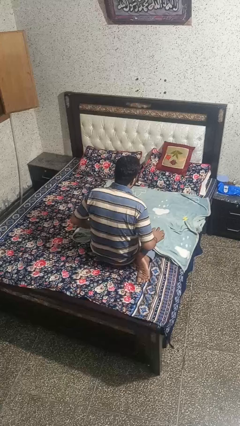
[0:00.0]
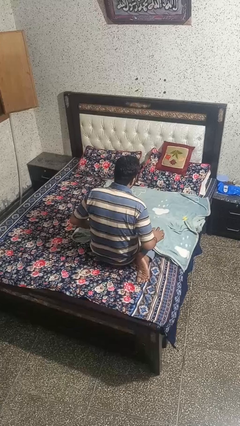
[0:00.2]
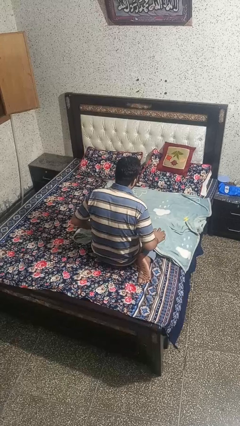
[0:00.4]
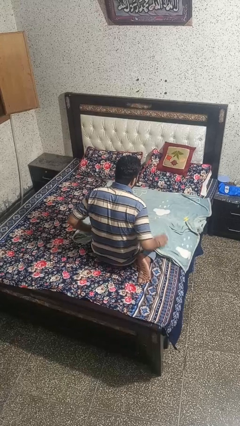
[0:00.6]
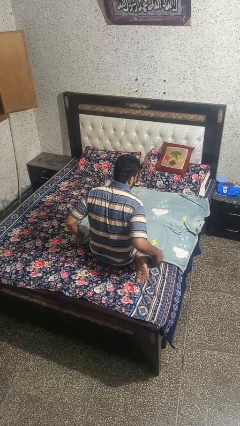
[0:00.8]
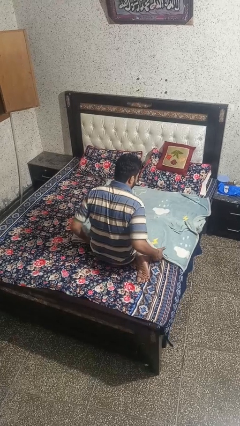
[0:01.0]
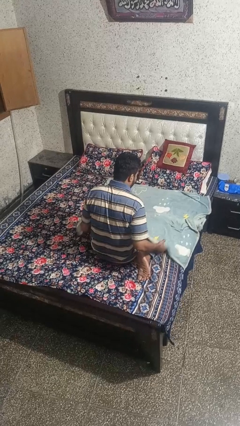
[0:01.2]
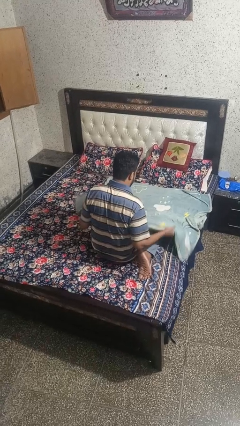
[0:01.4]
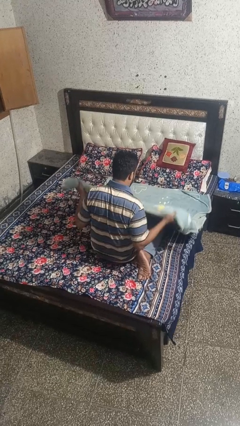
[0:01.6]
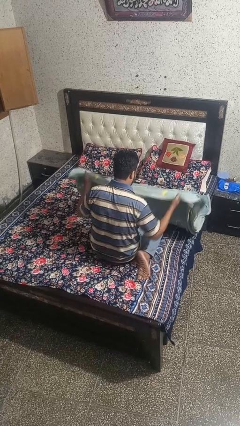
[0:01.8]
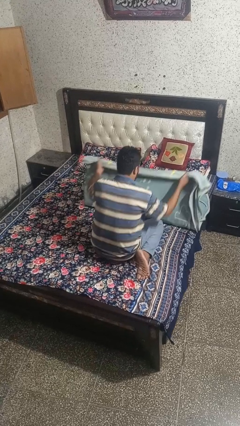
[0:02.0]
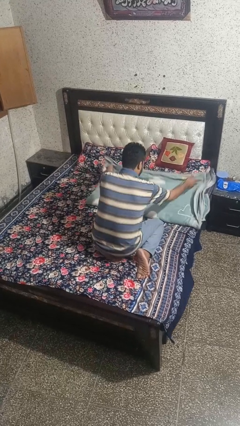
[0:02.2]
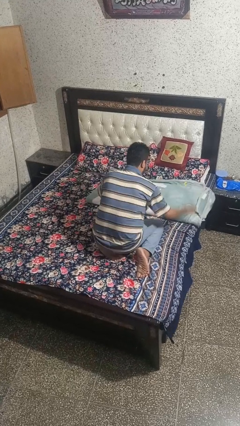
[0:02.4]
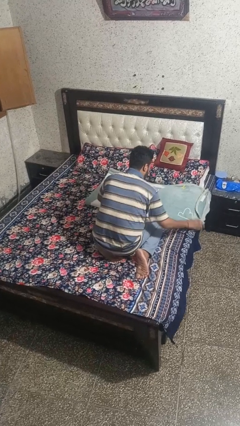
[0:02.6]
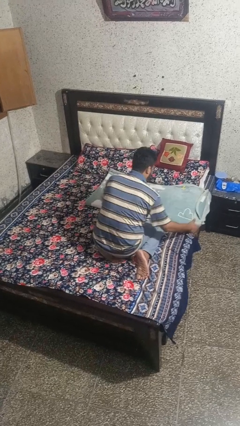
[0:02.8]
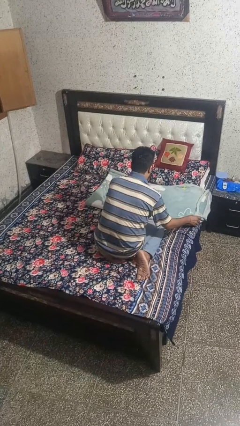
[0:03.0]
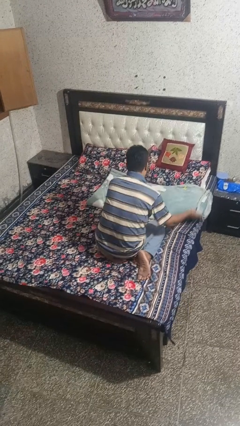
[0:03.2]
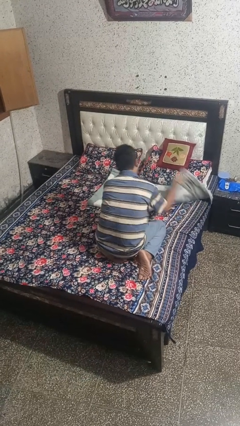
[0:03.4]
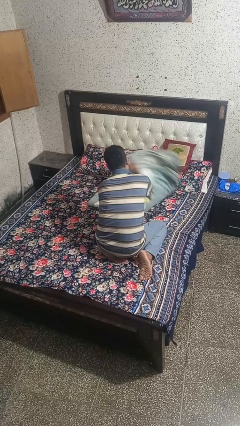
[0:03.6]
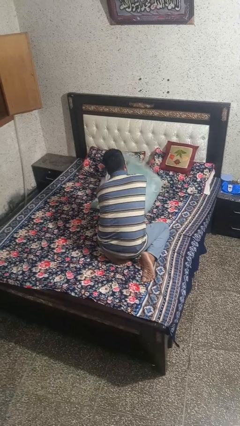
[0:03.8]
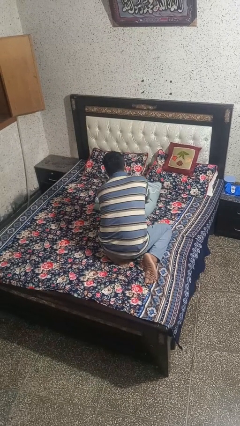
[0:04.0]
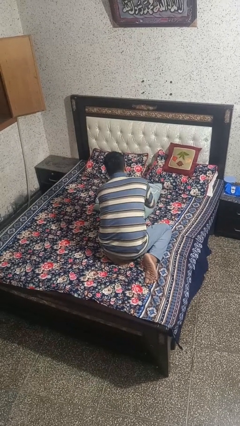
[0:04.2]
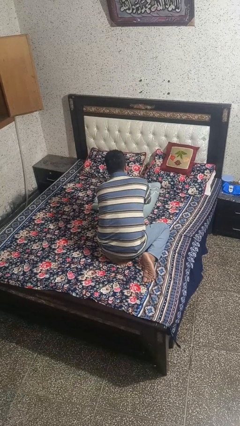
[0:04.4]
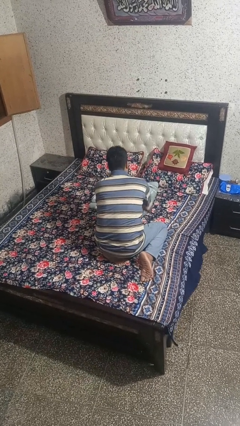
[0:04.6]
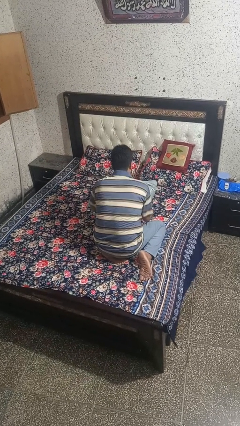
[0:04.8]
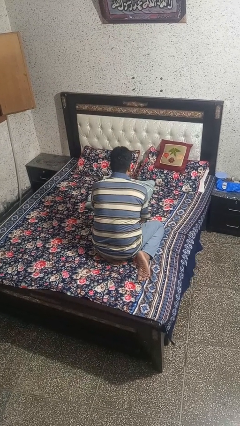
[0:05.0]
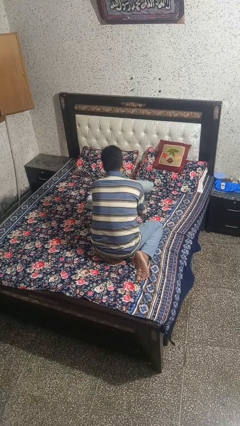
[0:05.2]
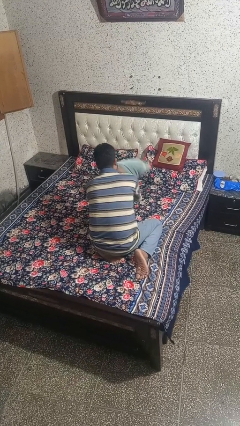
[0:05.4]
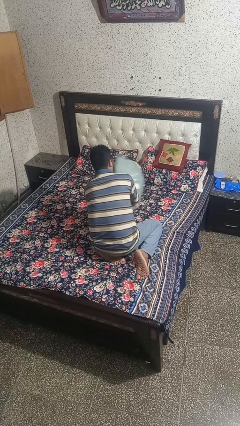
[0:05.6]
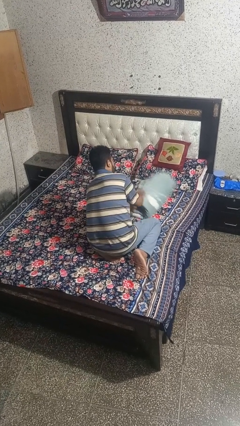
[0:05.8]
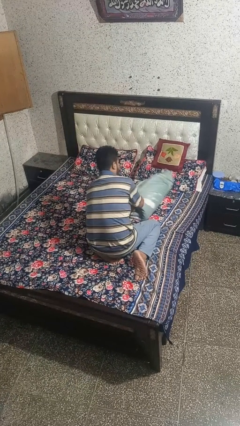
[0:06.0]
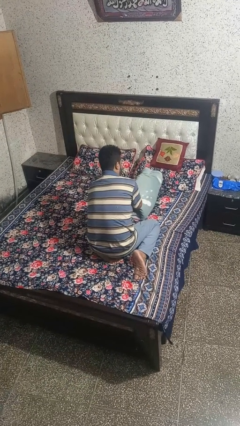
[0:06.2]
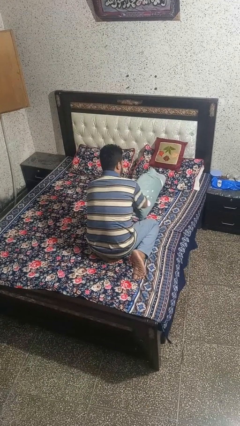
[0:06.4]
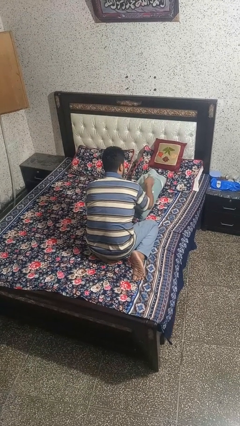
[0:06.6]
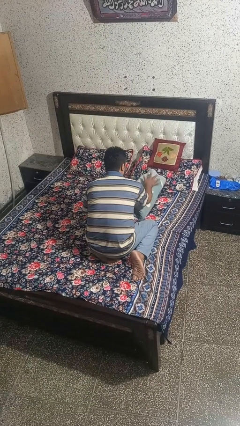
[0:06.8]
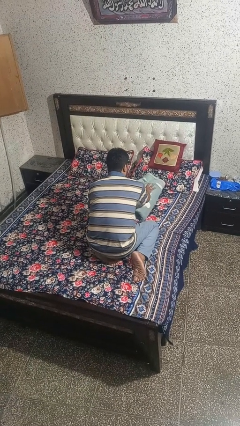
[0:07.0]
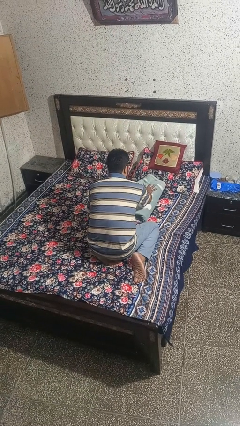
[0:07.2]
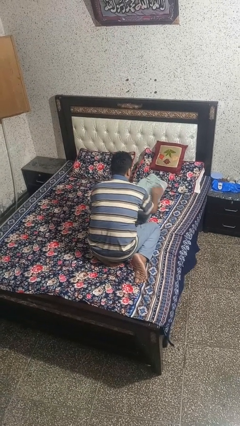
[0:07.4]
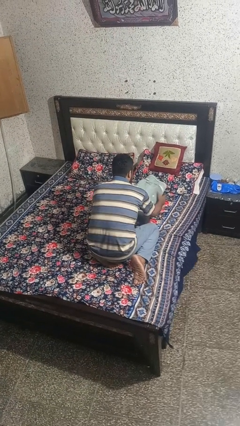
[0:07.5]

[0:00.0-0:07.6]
person folds blanket

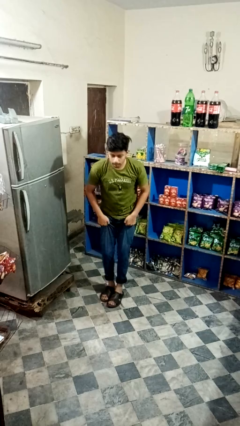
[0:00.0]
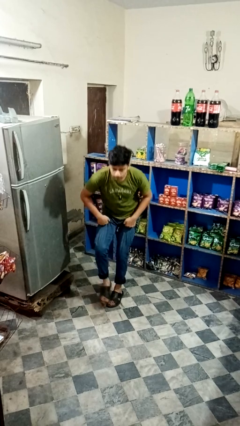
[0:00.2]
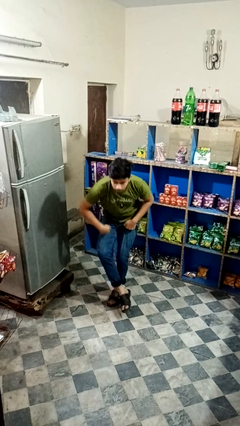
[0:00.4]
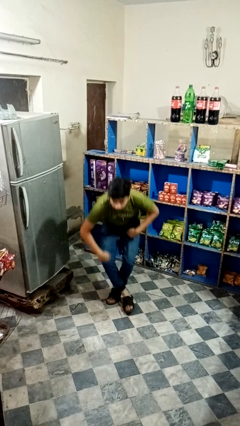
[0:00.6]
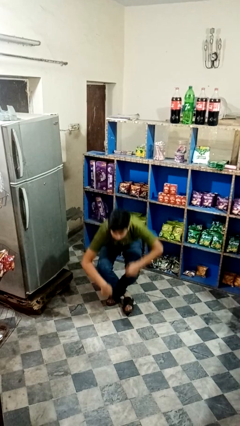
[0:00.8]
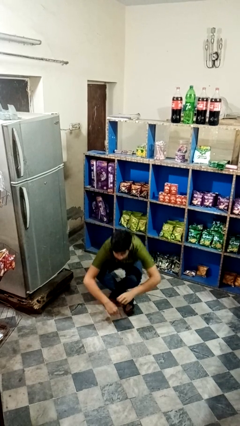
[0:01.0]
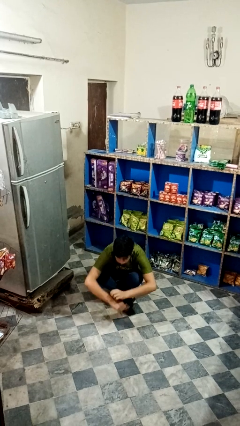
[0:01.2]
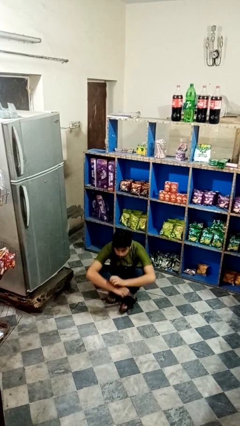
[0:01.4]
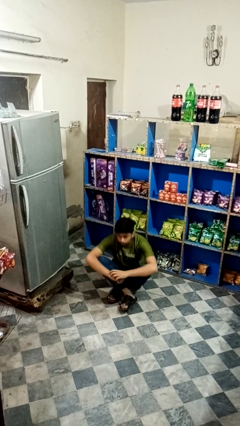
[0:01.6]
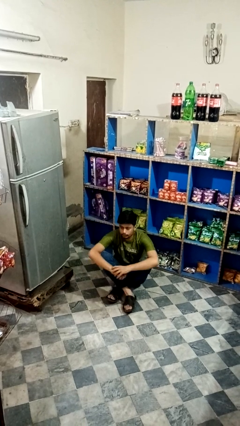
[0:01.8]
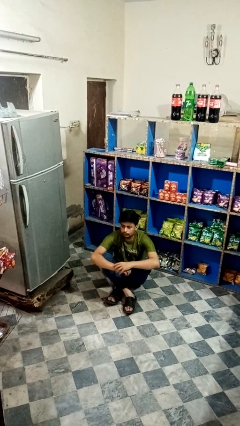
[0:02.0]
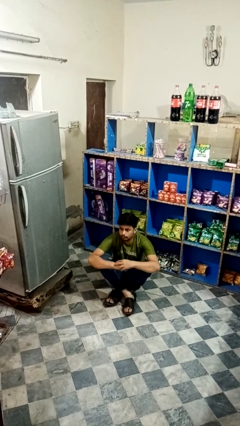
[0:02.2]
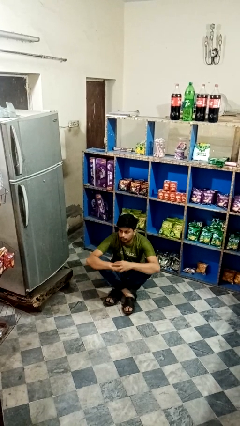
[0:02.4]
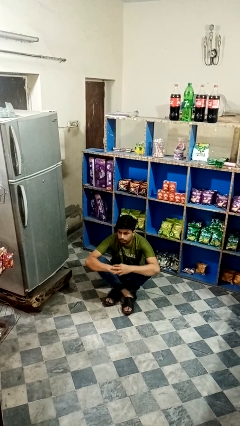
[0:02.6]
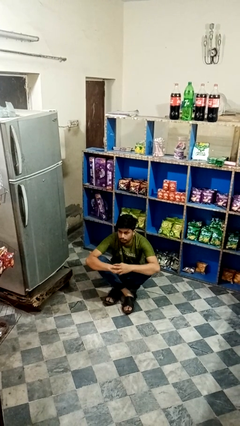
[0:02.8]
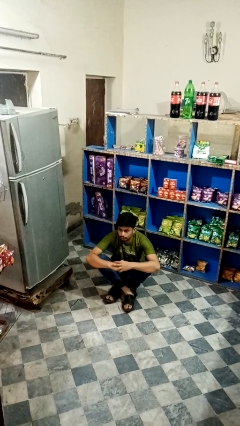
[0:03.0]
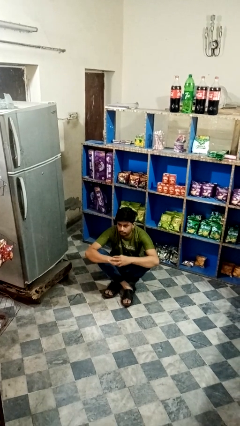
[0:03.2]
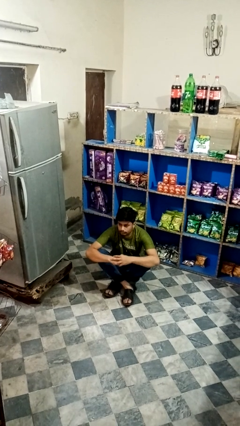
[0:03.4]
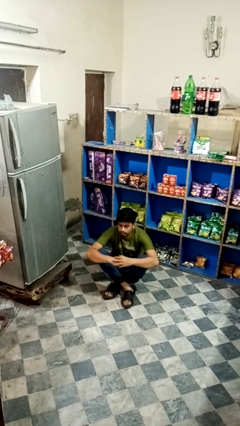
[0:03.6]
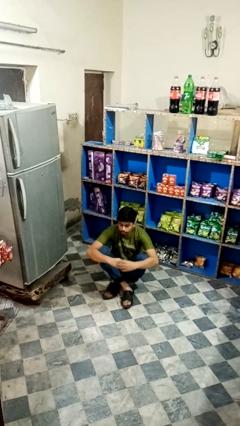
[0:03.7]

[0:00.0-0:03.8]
person sits crisscross

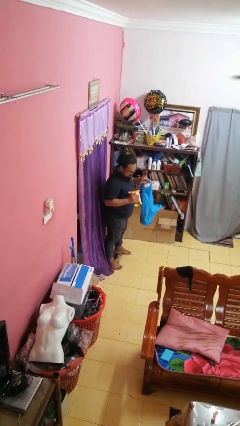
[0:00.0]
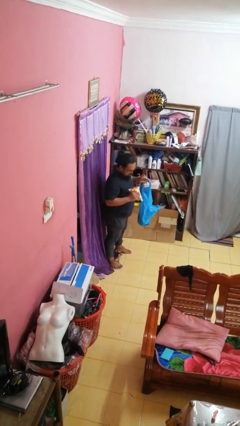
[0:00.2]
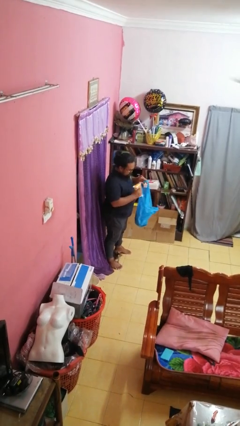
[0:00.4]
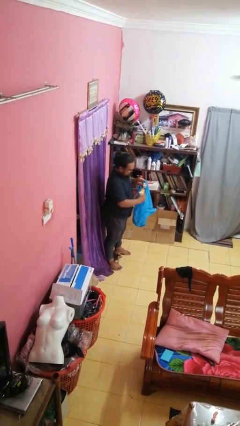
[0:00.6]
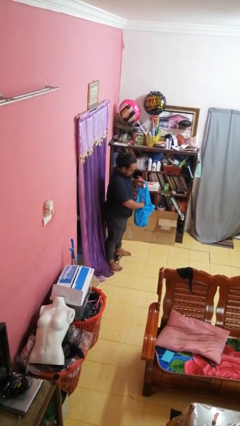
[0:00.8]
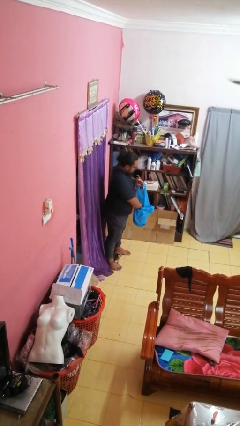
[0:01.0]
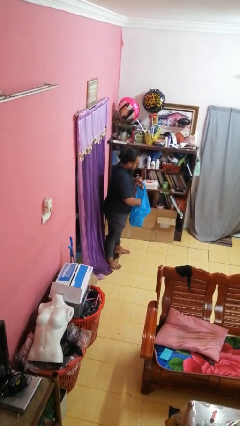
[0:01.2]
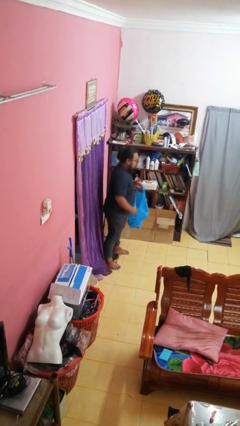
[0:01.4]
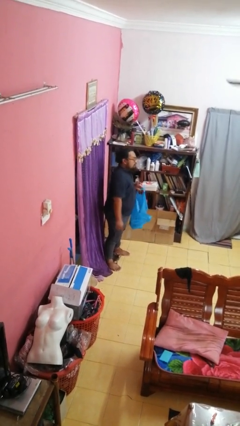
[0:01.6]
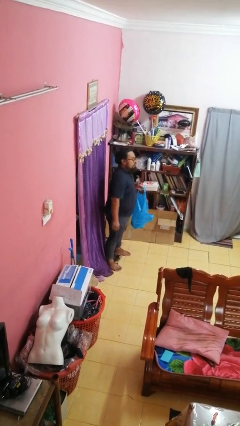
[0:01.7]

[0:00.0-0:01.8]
person puts object into bag

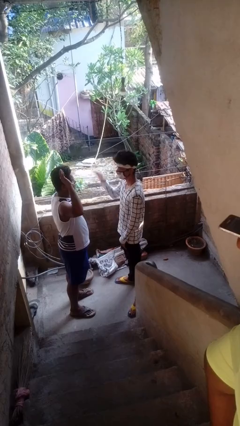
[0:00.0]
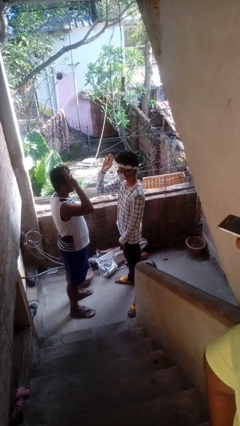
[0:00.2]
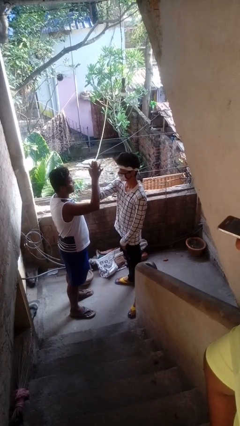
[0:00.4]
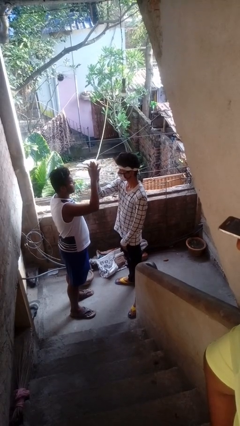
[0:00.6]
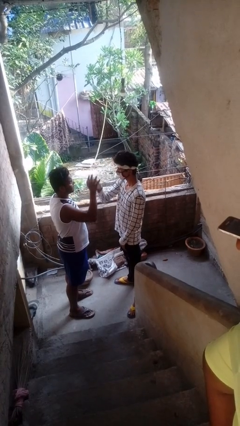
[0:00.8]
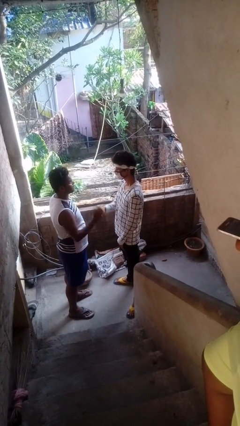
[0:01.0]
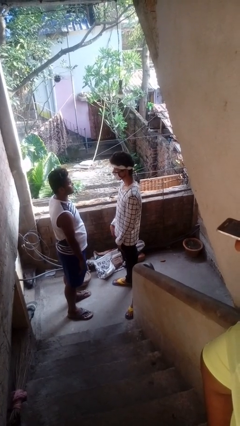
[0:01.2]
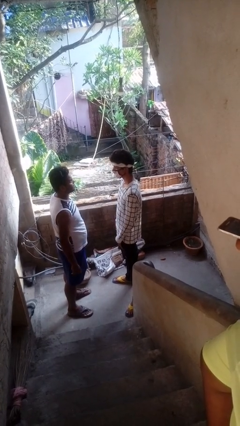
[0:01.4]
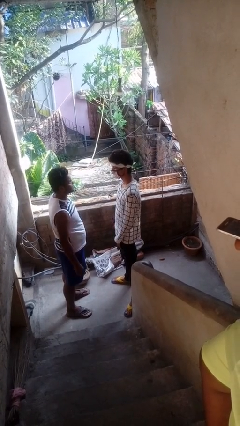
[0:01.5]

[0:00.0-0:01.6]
person highfives hand

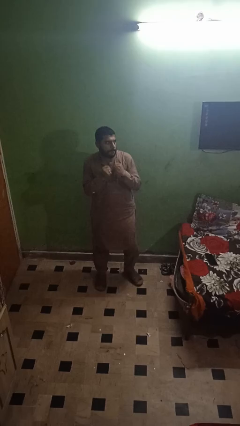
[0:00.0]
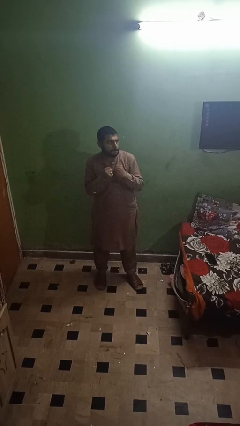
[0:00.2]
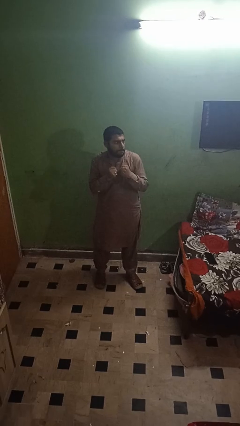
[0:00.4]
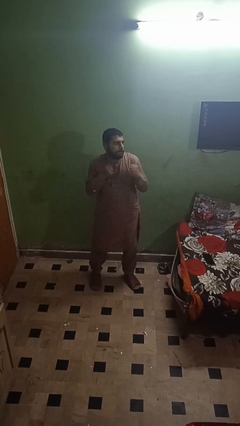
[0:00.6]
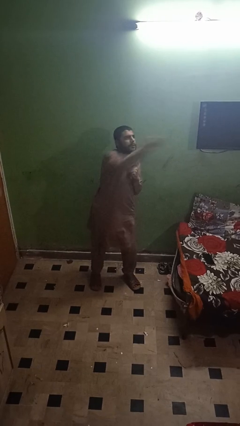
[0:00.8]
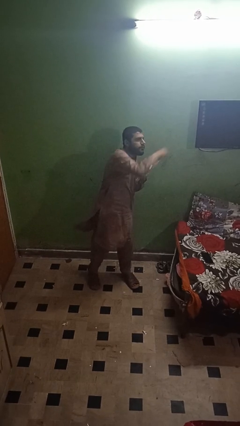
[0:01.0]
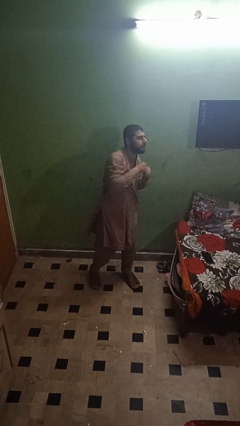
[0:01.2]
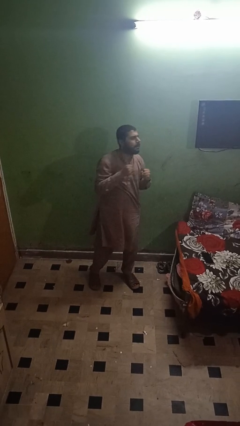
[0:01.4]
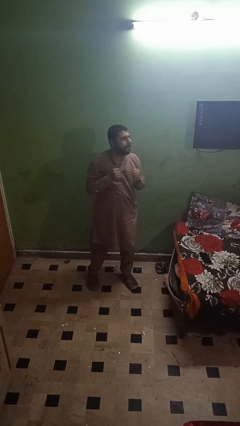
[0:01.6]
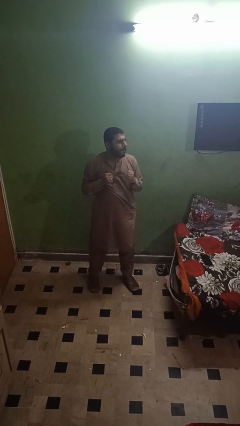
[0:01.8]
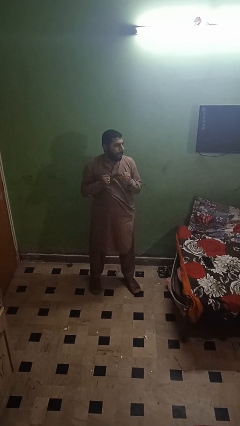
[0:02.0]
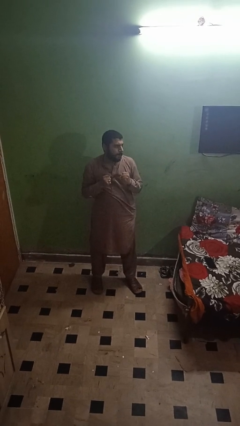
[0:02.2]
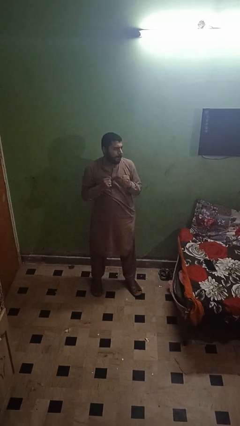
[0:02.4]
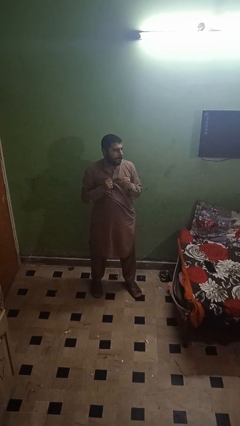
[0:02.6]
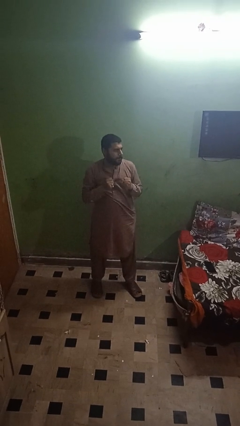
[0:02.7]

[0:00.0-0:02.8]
person punches
